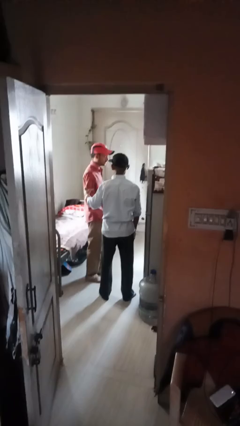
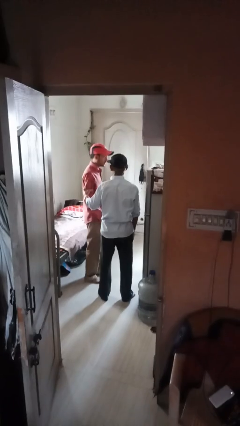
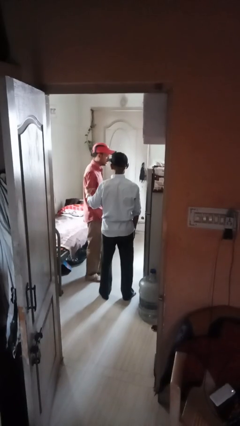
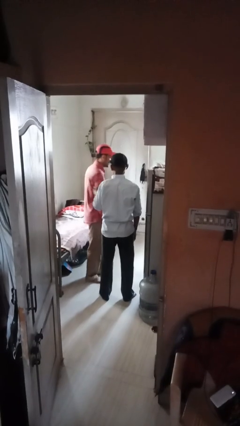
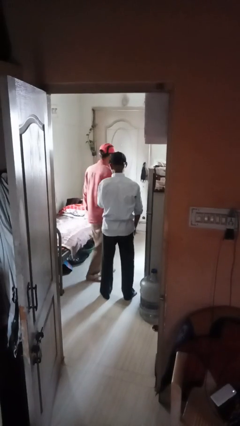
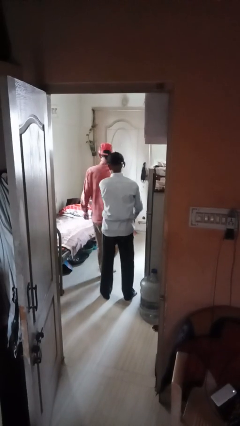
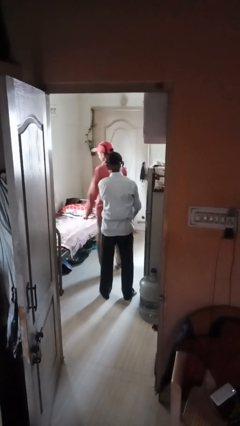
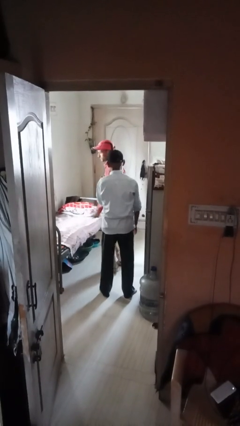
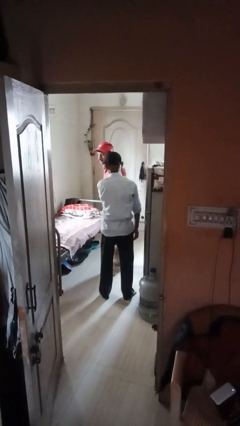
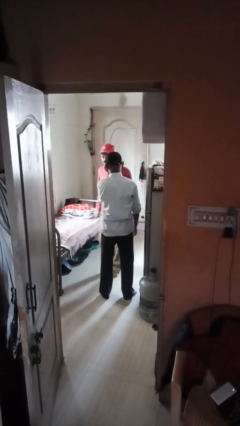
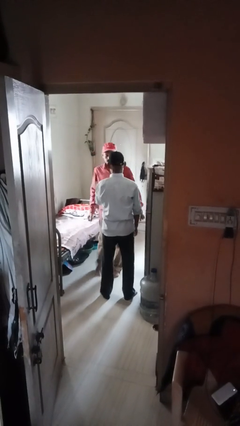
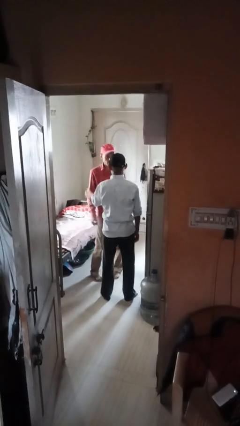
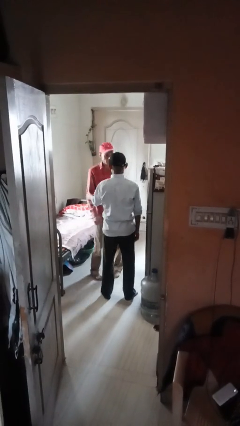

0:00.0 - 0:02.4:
person spins person around

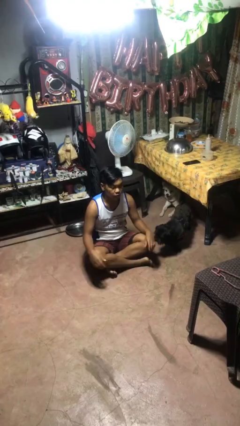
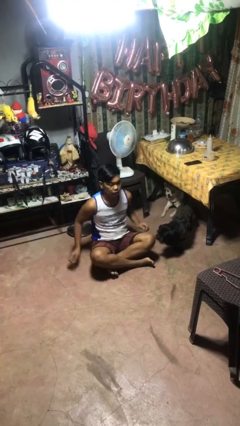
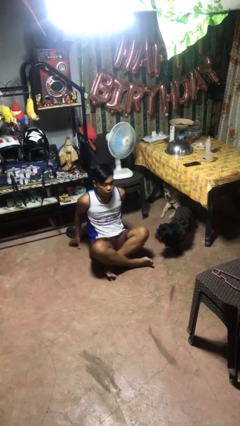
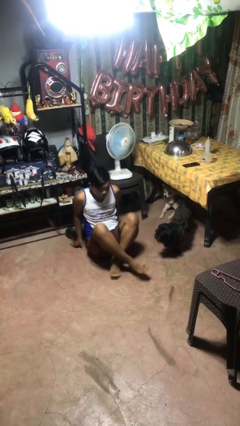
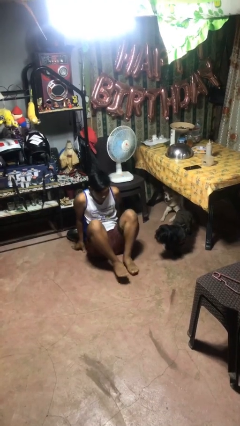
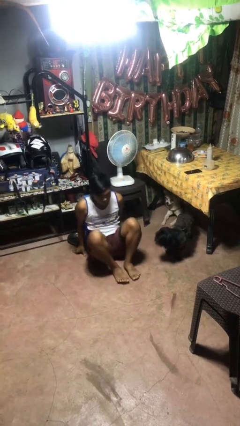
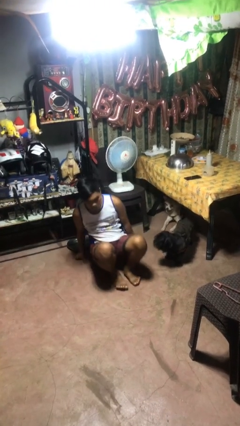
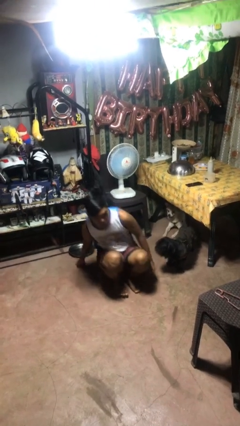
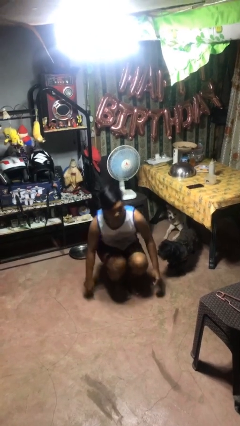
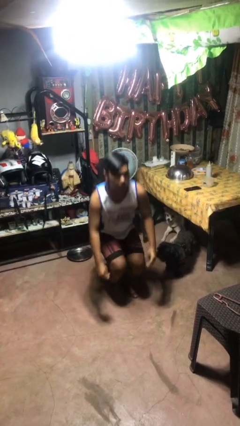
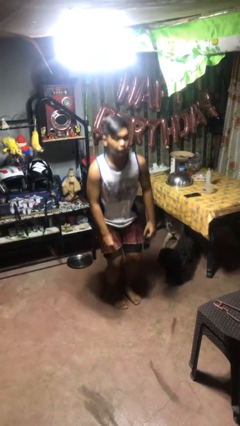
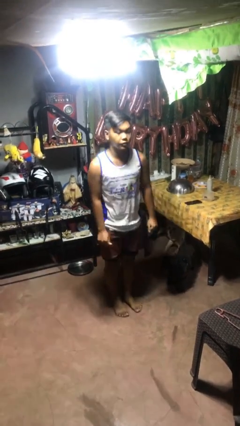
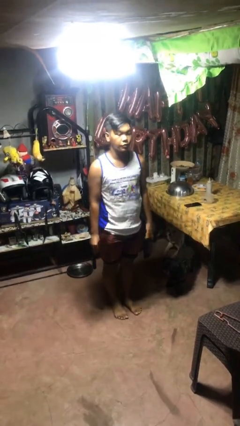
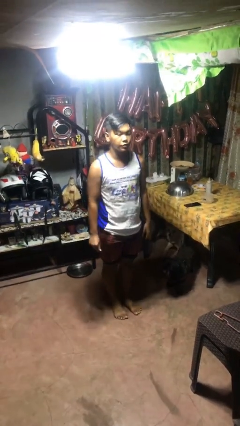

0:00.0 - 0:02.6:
person stands up from floor

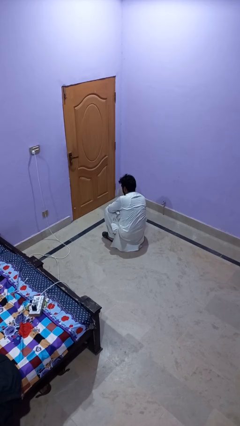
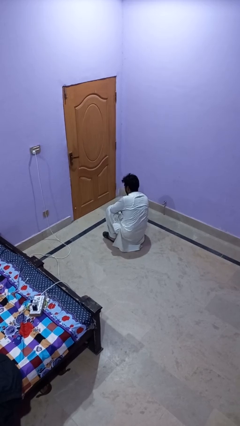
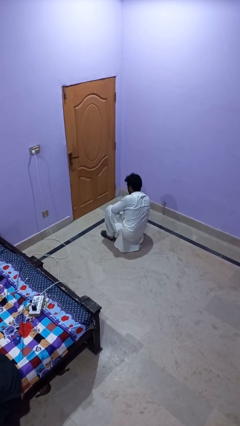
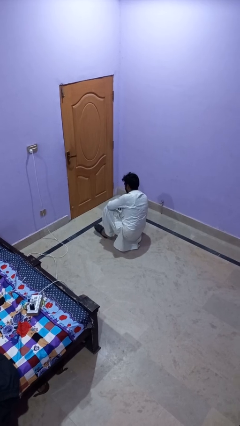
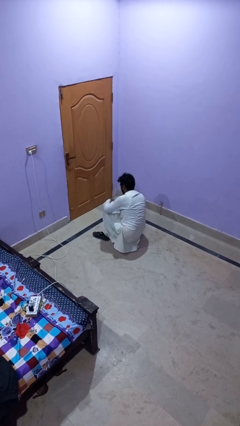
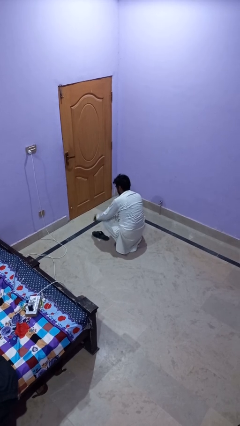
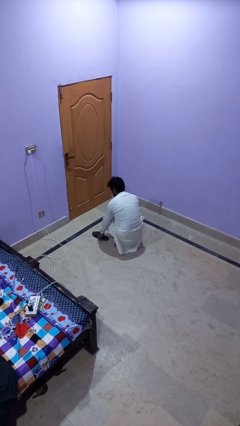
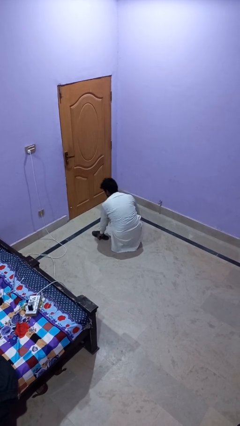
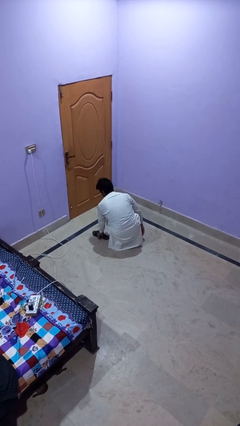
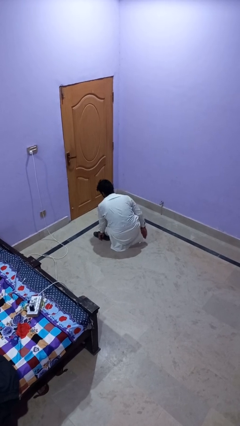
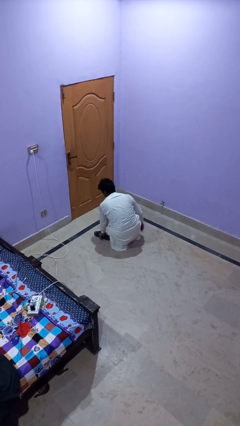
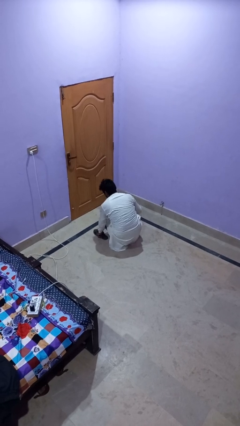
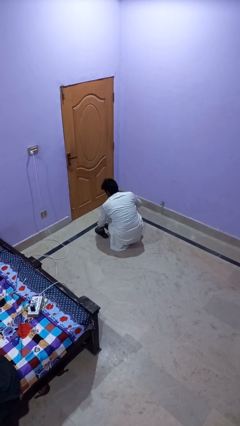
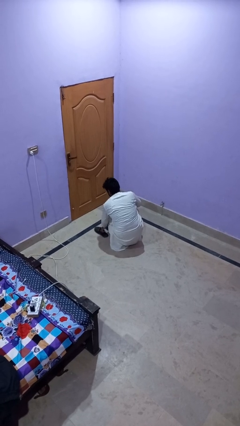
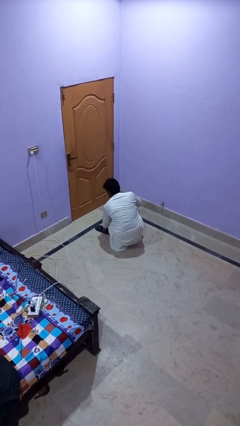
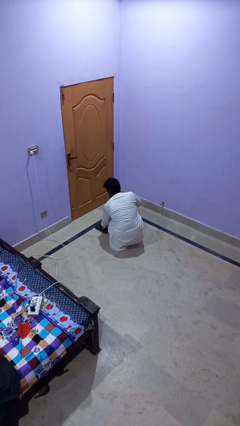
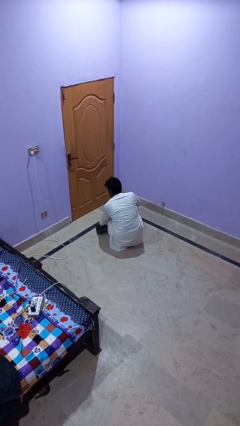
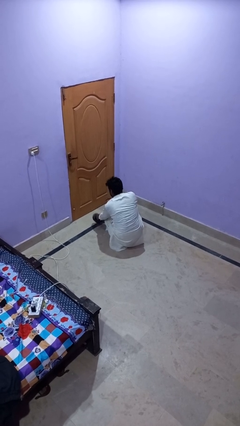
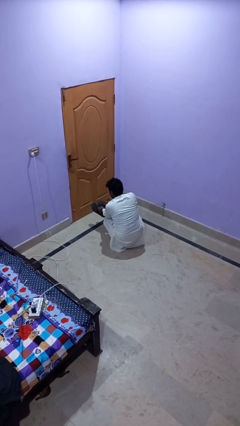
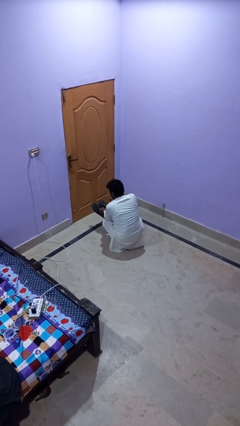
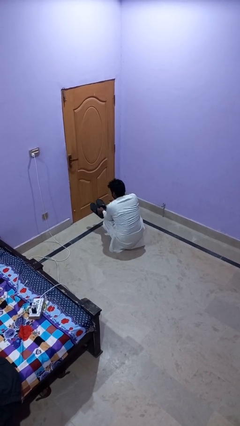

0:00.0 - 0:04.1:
person takes off shoes

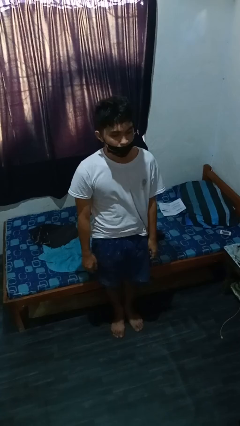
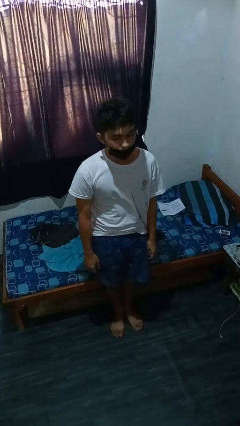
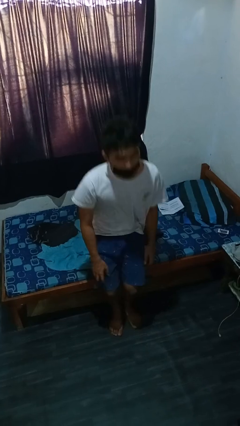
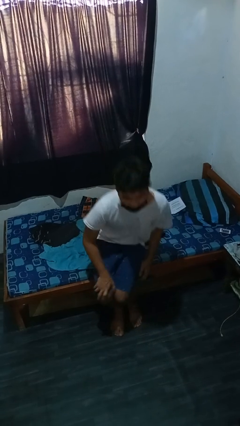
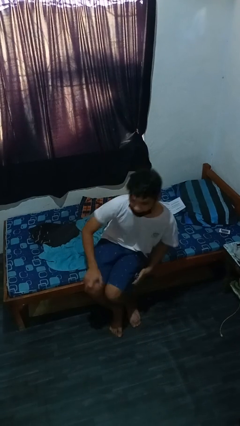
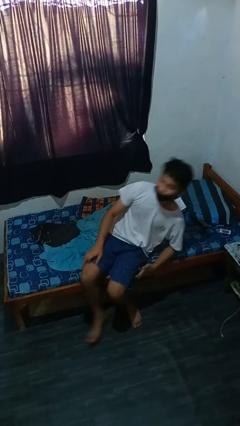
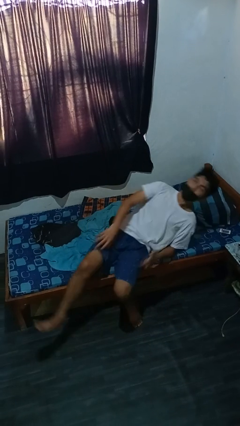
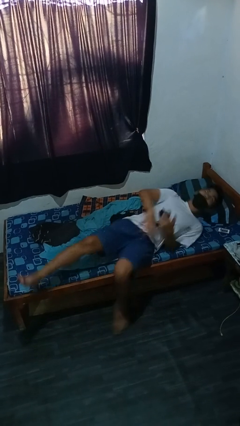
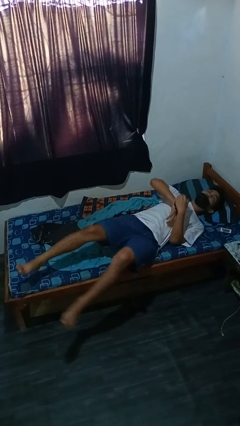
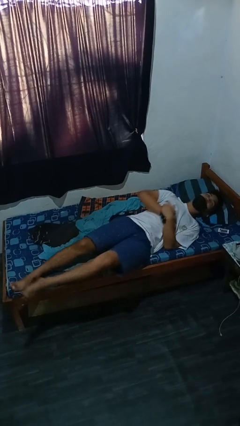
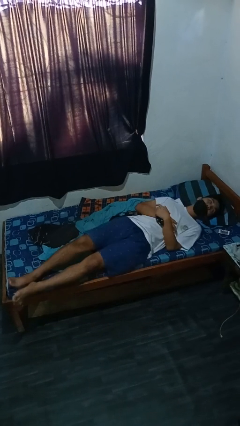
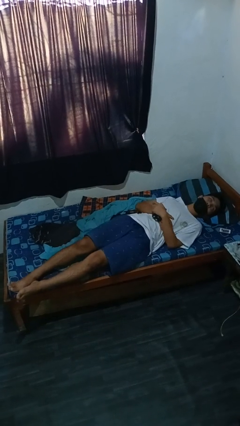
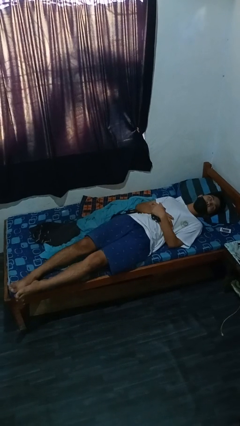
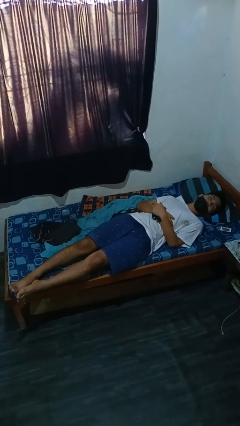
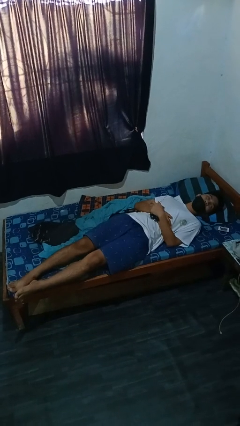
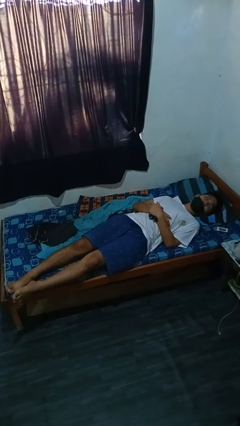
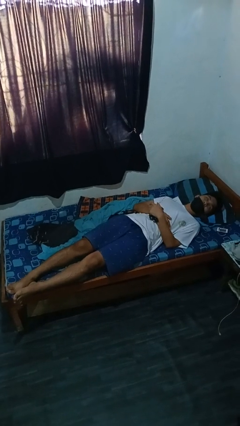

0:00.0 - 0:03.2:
person lies down on bed

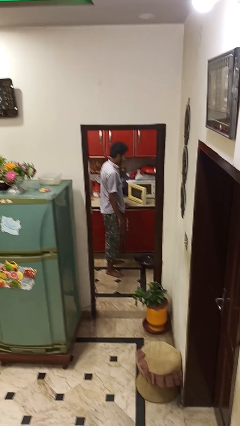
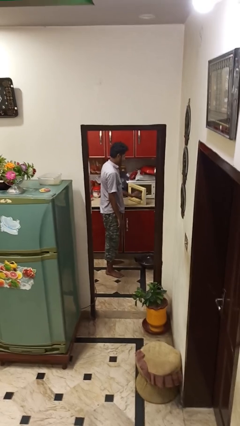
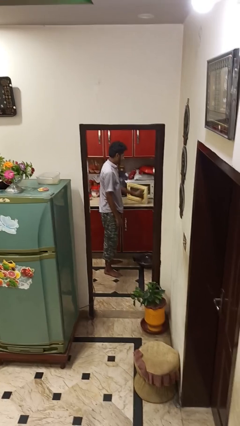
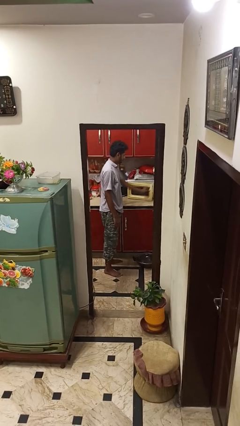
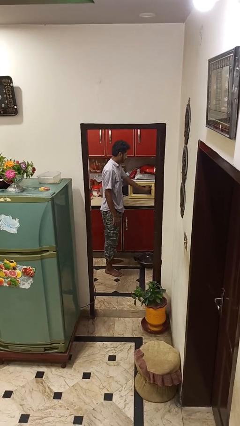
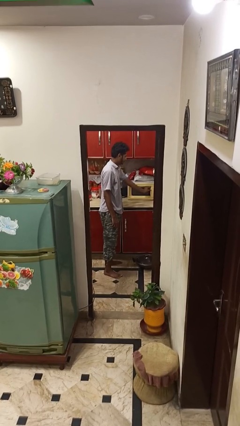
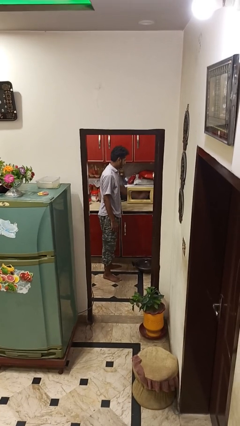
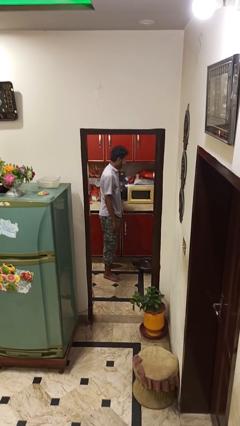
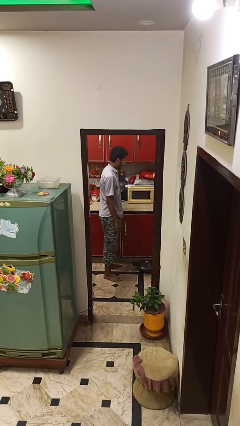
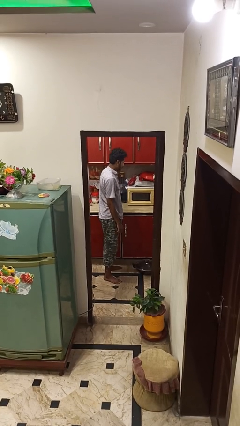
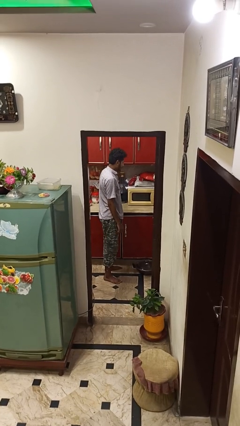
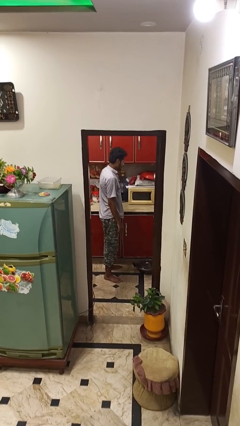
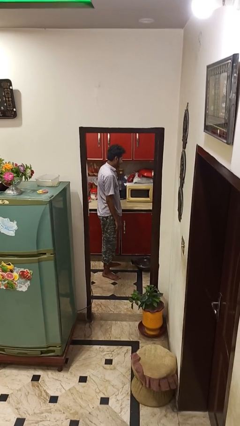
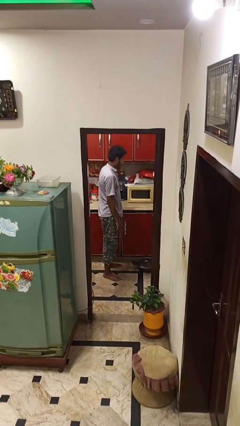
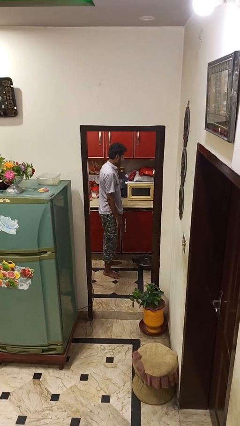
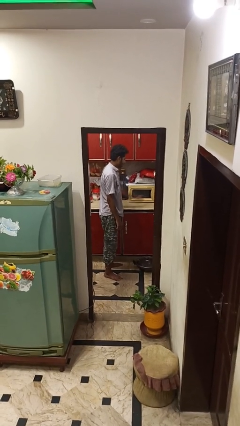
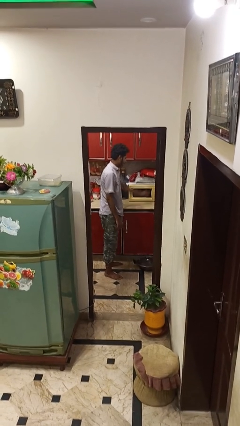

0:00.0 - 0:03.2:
person closes microwave

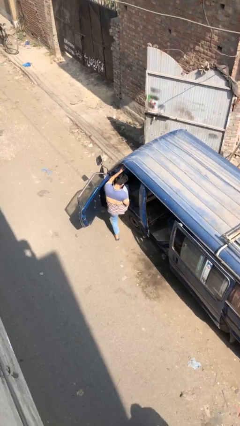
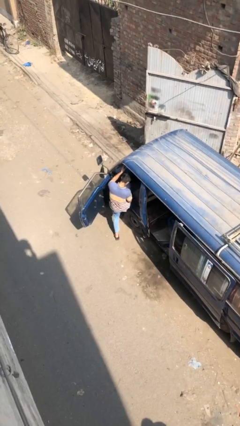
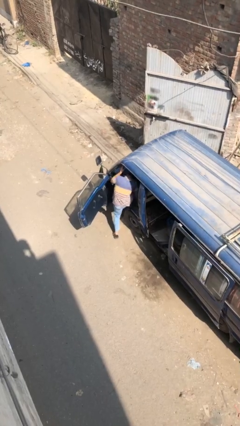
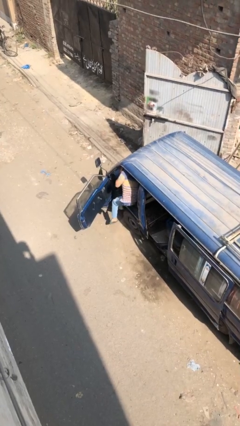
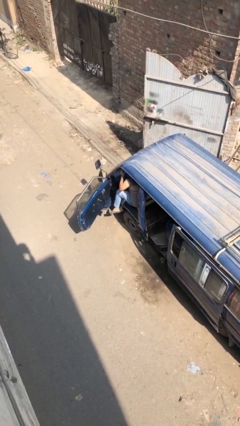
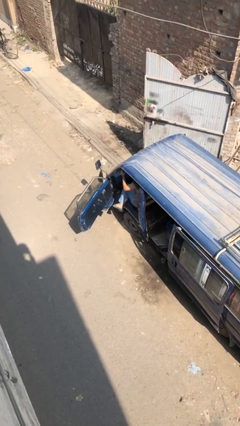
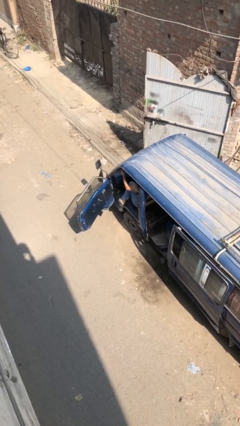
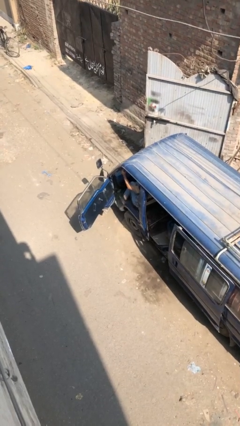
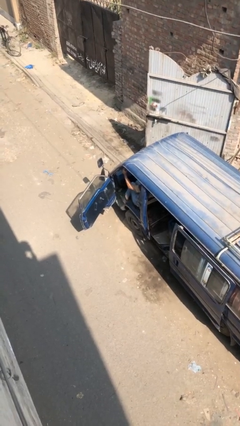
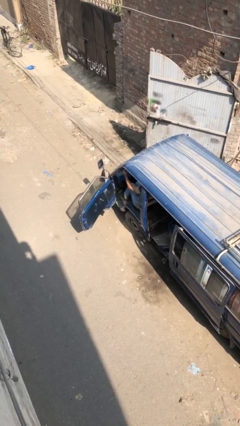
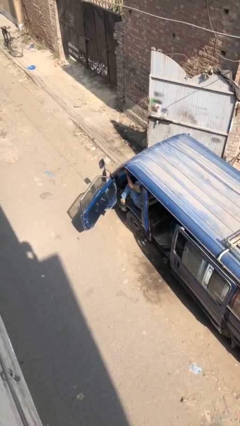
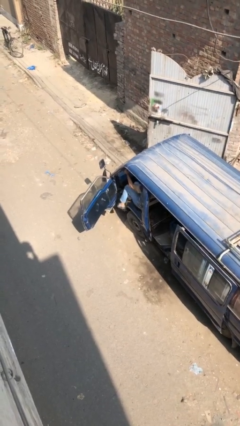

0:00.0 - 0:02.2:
person enters car

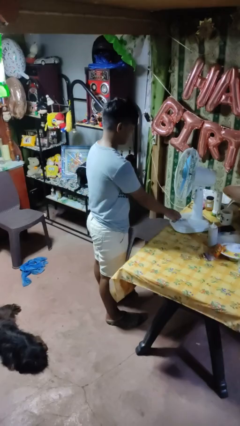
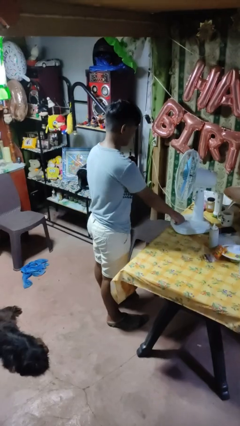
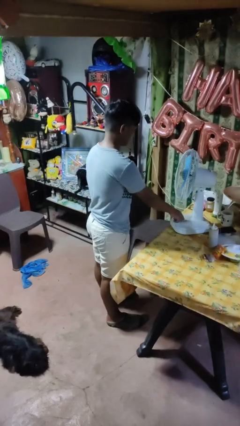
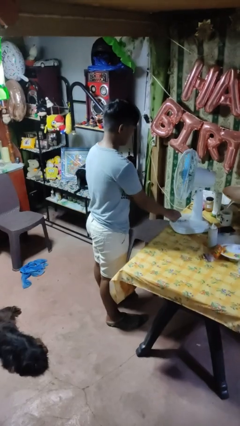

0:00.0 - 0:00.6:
person turns on fan
